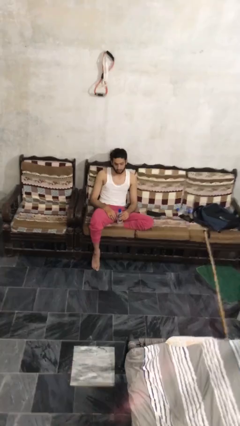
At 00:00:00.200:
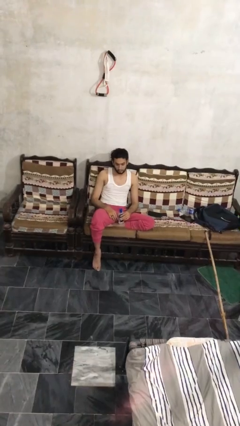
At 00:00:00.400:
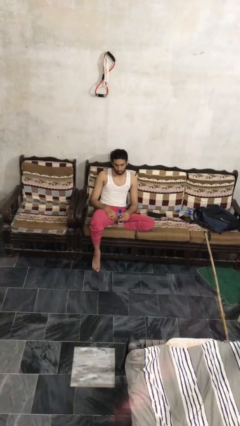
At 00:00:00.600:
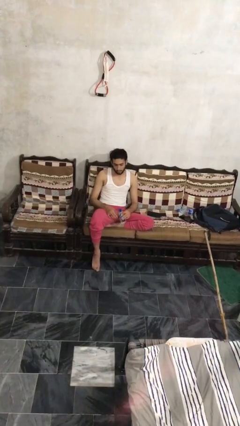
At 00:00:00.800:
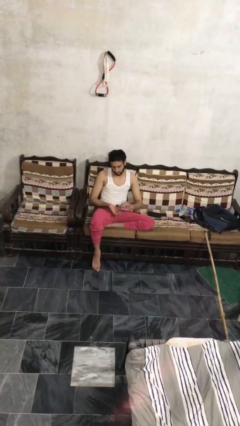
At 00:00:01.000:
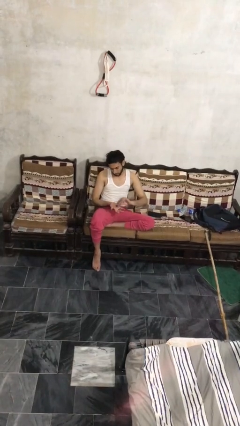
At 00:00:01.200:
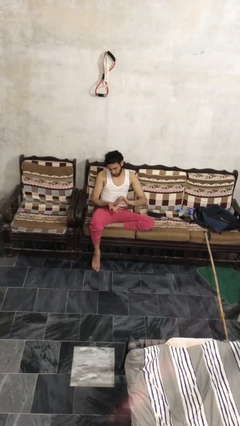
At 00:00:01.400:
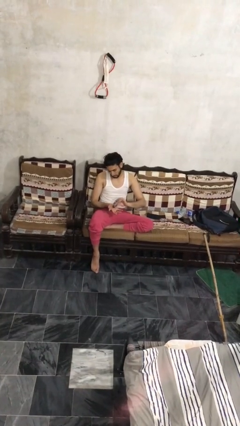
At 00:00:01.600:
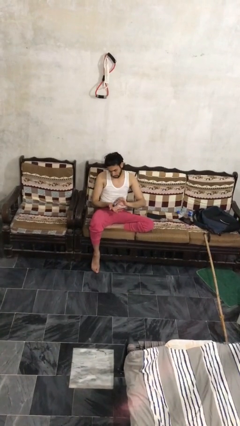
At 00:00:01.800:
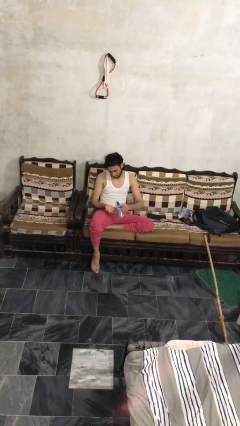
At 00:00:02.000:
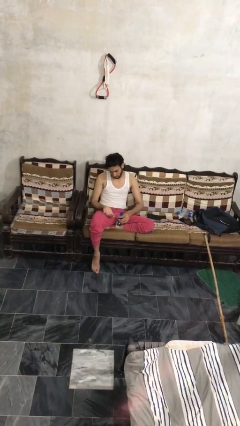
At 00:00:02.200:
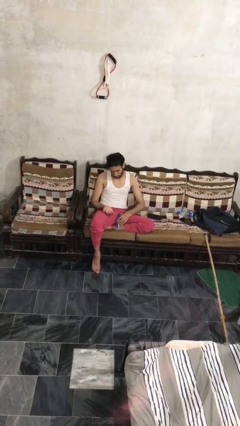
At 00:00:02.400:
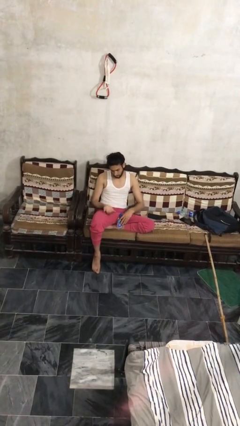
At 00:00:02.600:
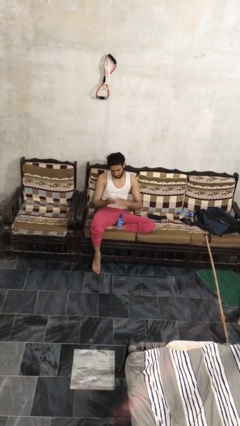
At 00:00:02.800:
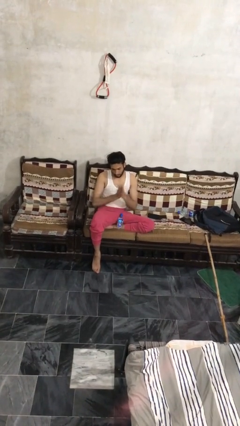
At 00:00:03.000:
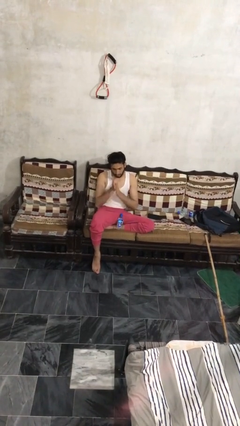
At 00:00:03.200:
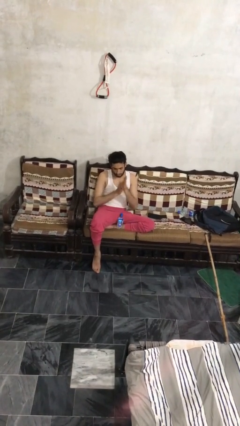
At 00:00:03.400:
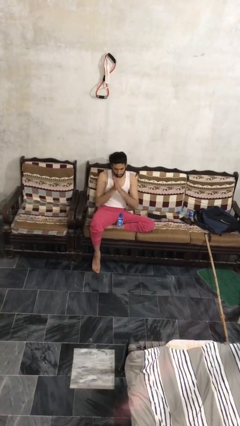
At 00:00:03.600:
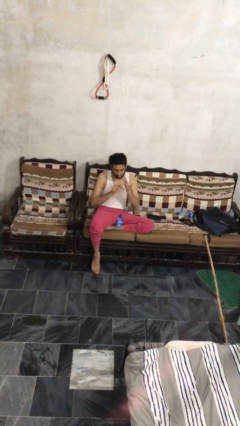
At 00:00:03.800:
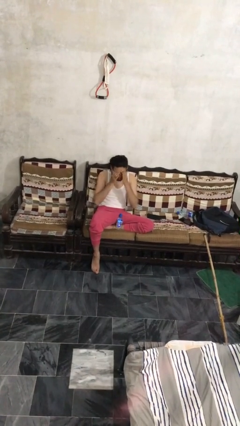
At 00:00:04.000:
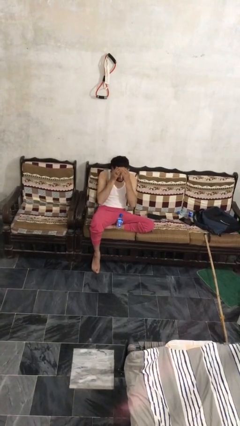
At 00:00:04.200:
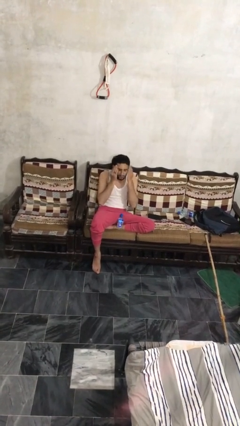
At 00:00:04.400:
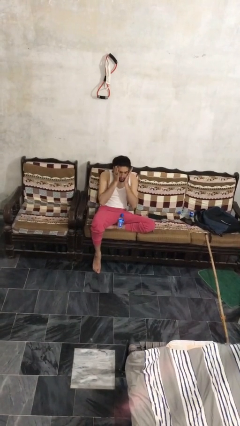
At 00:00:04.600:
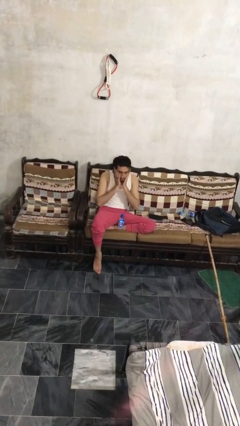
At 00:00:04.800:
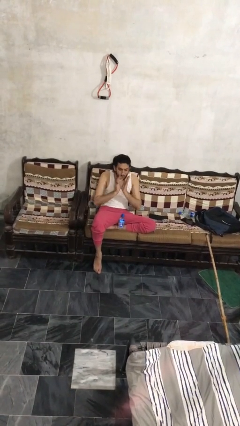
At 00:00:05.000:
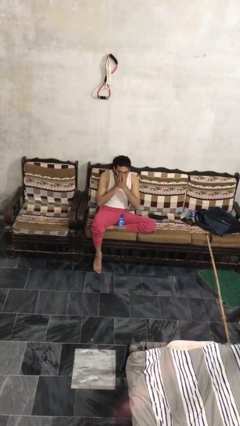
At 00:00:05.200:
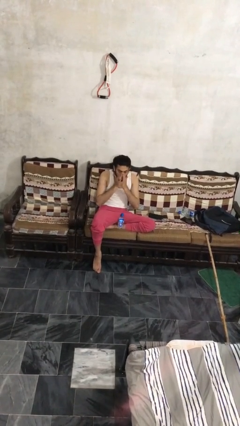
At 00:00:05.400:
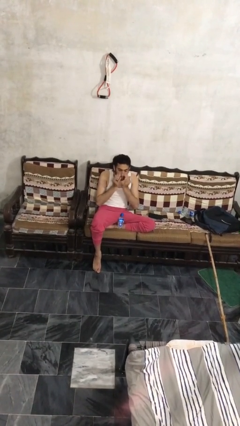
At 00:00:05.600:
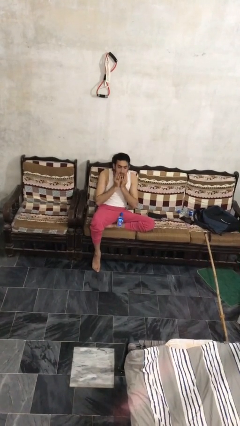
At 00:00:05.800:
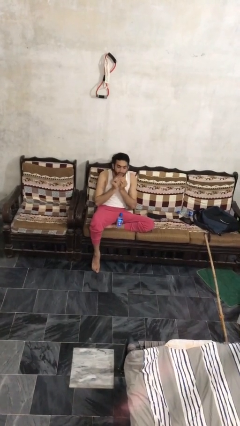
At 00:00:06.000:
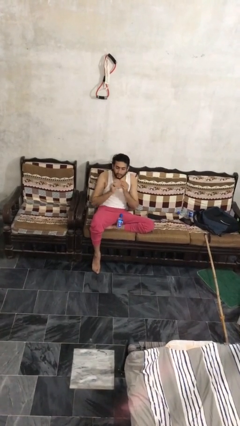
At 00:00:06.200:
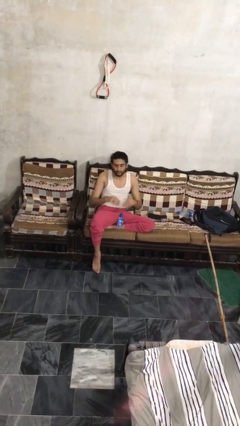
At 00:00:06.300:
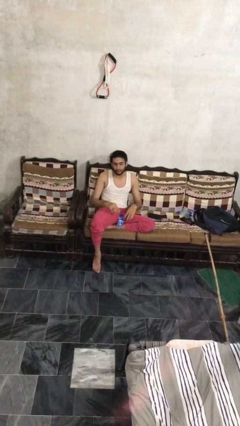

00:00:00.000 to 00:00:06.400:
person applies facial moisturizer

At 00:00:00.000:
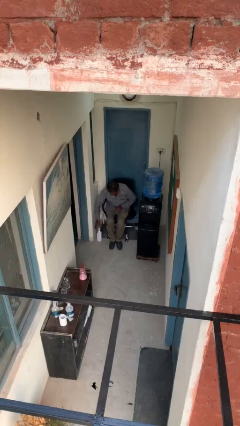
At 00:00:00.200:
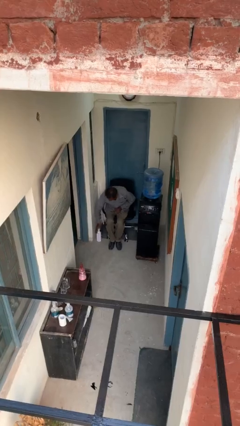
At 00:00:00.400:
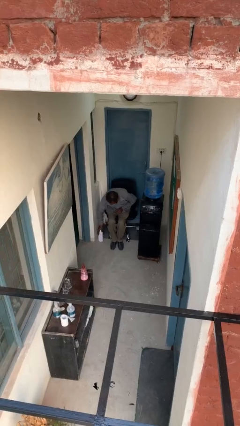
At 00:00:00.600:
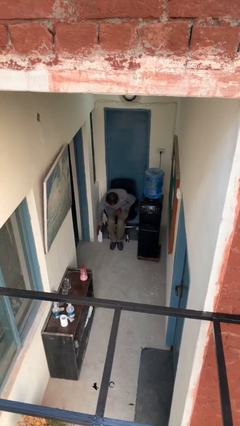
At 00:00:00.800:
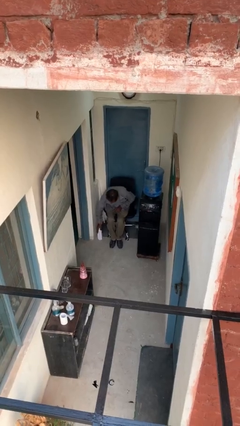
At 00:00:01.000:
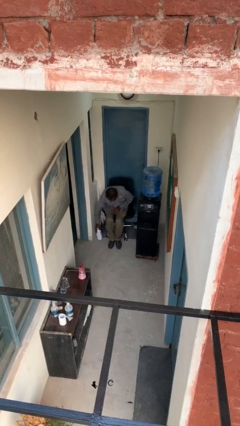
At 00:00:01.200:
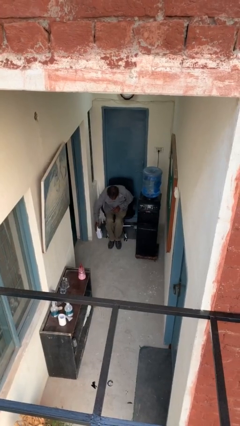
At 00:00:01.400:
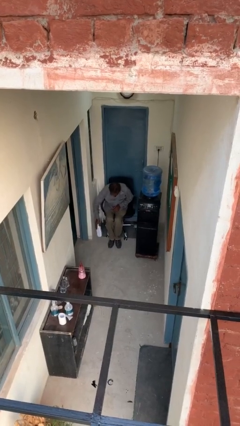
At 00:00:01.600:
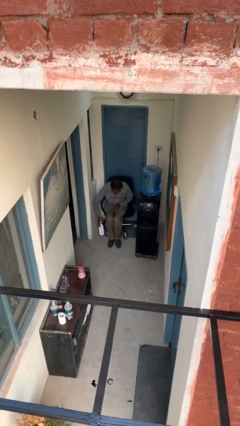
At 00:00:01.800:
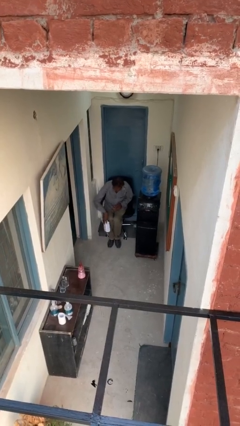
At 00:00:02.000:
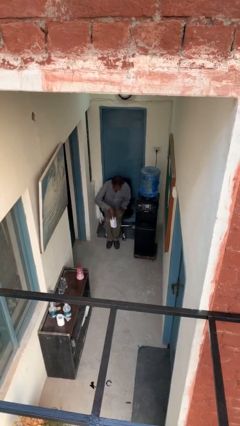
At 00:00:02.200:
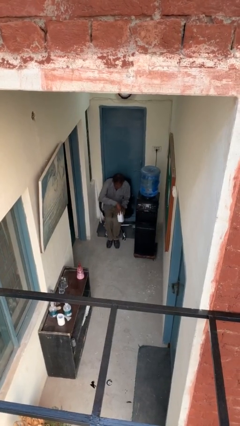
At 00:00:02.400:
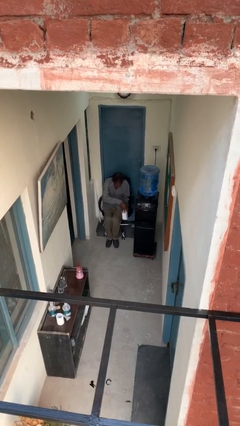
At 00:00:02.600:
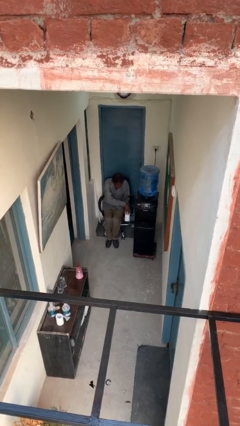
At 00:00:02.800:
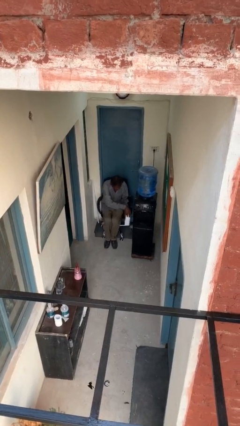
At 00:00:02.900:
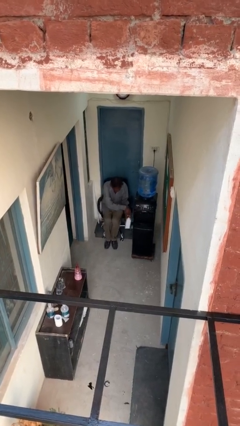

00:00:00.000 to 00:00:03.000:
person picks up object from floor

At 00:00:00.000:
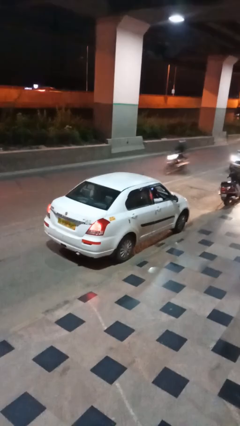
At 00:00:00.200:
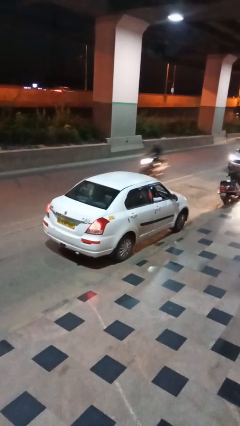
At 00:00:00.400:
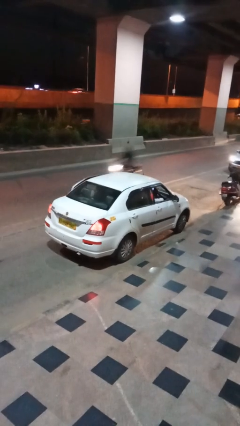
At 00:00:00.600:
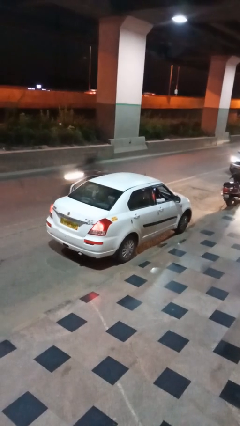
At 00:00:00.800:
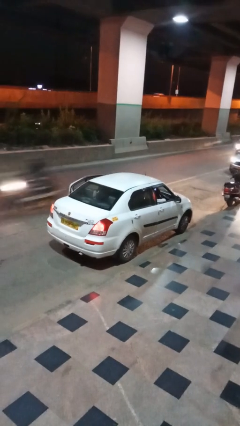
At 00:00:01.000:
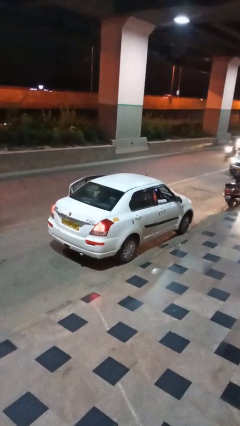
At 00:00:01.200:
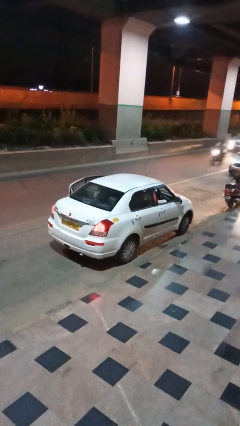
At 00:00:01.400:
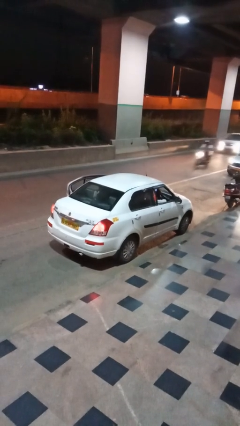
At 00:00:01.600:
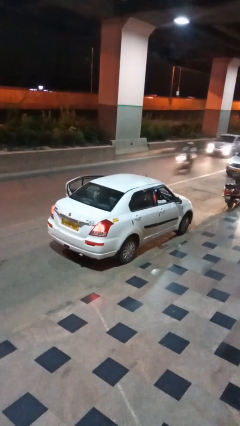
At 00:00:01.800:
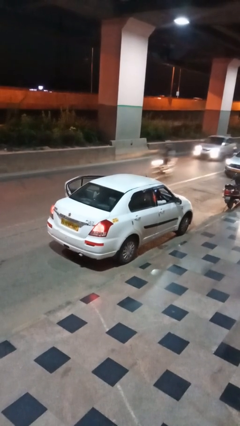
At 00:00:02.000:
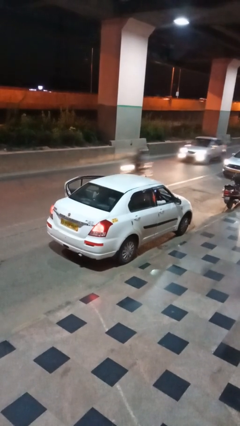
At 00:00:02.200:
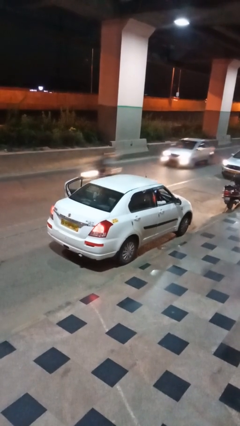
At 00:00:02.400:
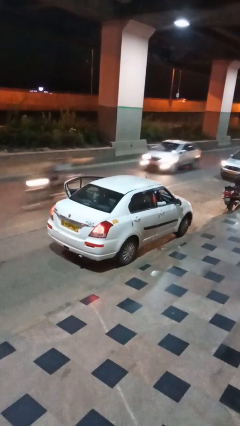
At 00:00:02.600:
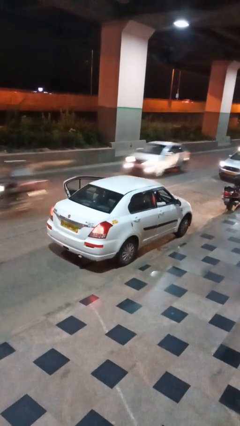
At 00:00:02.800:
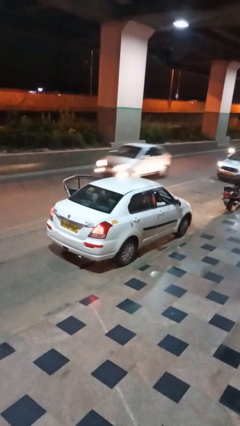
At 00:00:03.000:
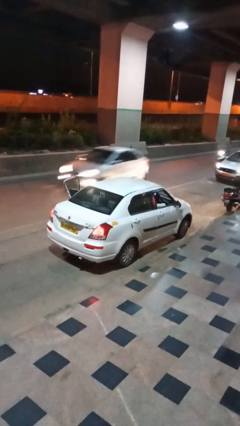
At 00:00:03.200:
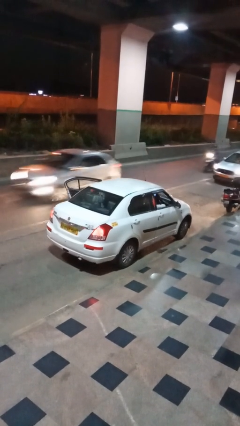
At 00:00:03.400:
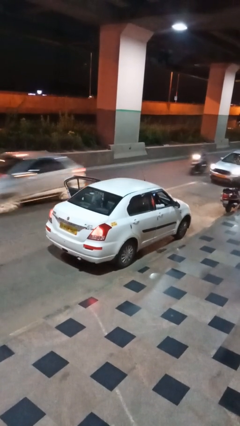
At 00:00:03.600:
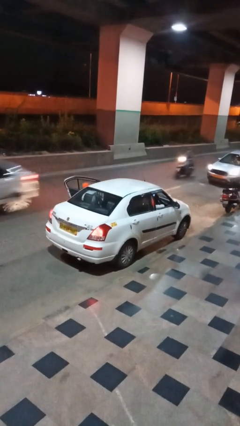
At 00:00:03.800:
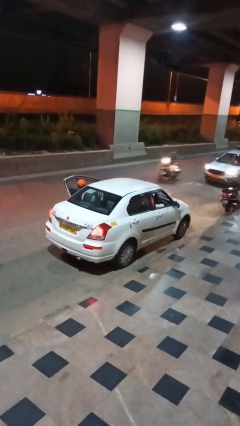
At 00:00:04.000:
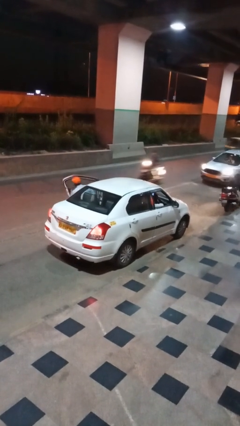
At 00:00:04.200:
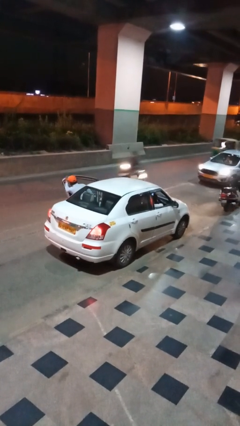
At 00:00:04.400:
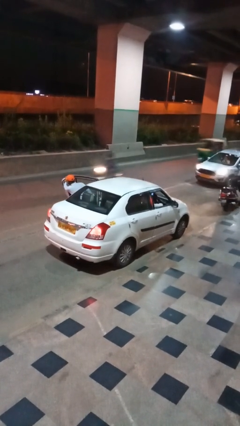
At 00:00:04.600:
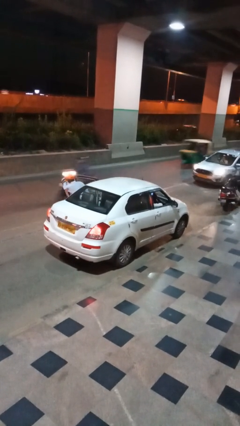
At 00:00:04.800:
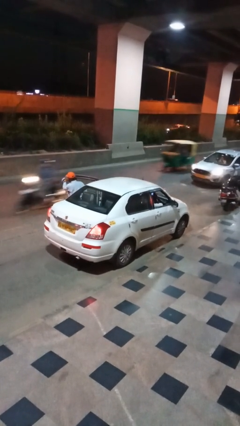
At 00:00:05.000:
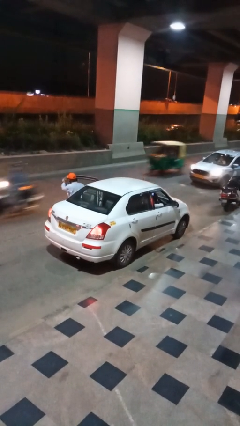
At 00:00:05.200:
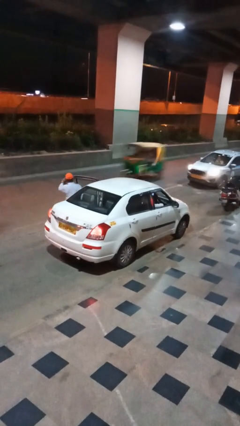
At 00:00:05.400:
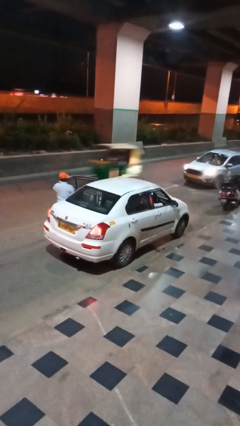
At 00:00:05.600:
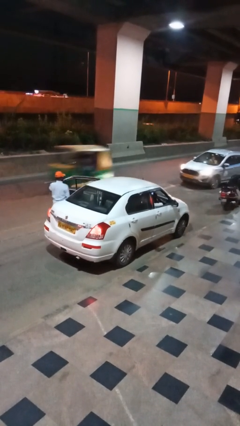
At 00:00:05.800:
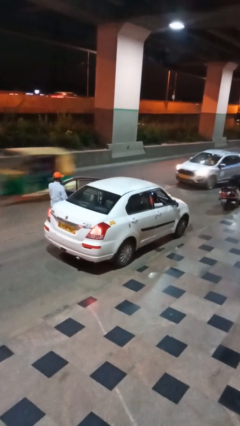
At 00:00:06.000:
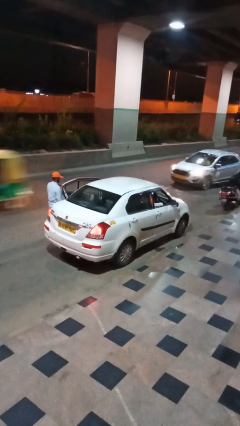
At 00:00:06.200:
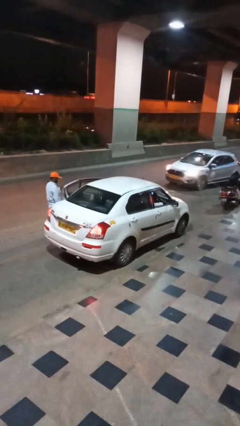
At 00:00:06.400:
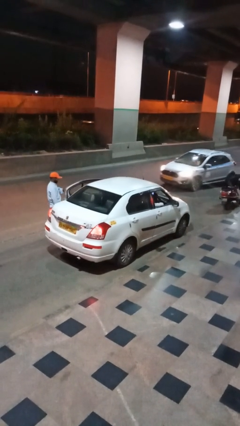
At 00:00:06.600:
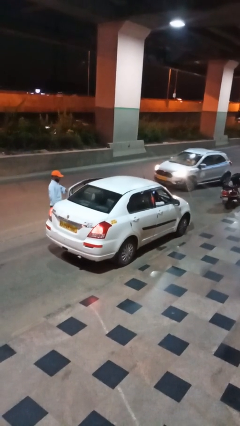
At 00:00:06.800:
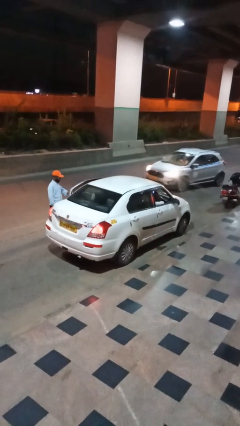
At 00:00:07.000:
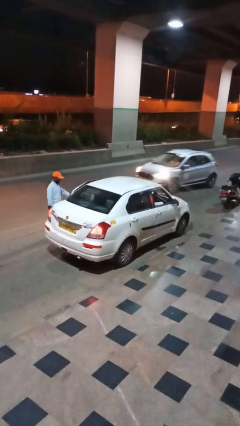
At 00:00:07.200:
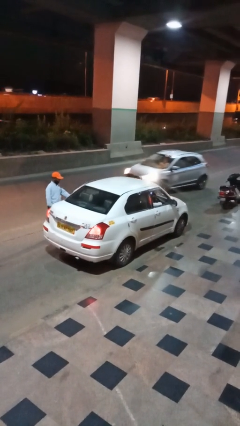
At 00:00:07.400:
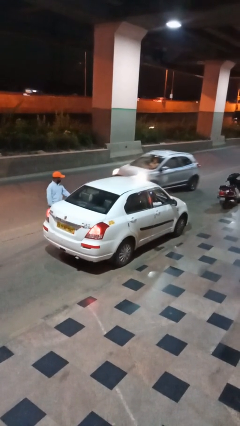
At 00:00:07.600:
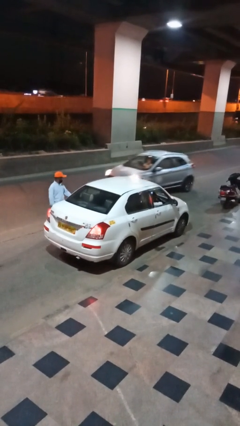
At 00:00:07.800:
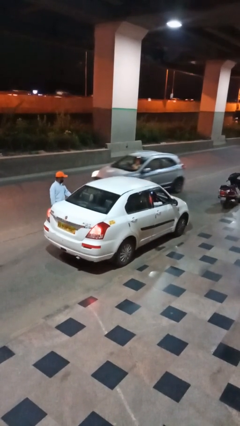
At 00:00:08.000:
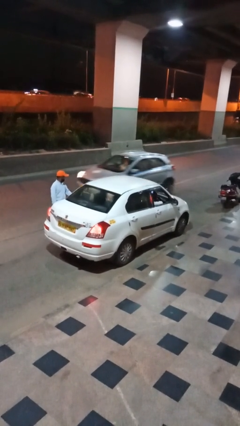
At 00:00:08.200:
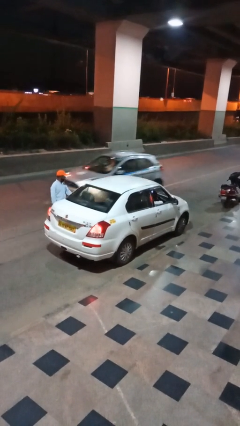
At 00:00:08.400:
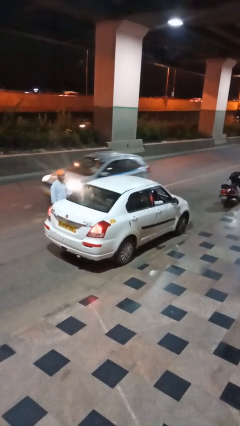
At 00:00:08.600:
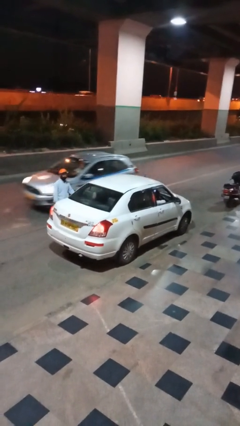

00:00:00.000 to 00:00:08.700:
car drops off person
